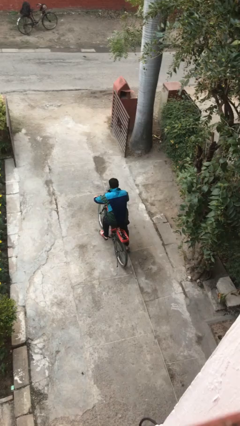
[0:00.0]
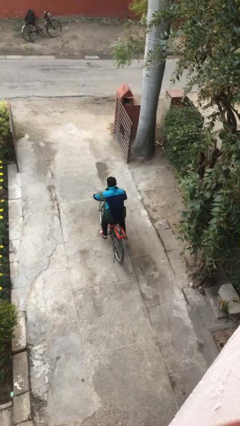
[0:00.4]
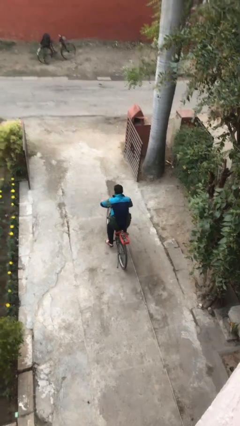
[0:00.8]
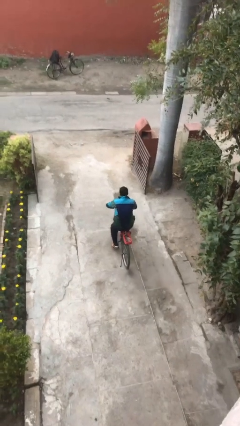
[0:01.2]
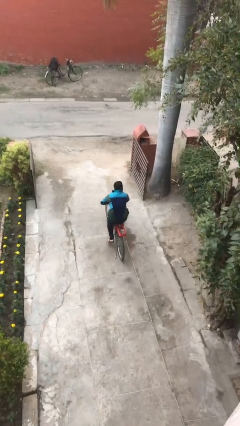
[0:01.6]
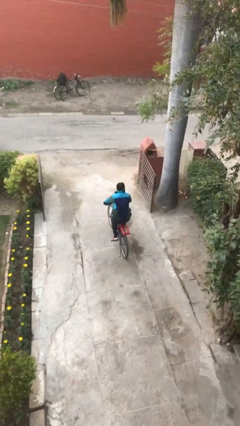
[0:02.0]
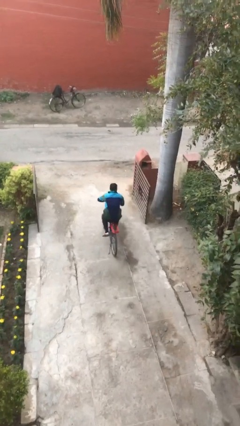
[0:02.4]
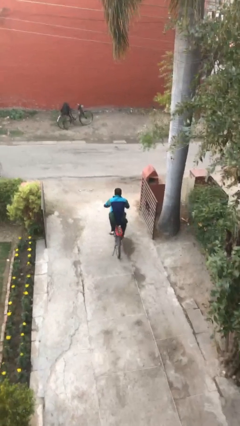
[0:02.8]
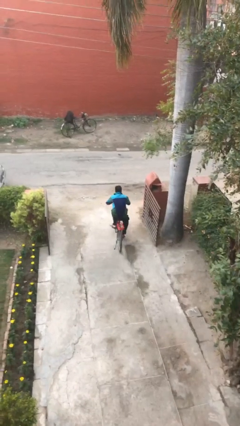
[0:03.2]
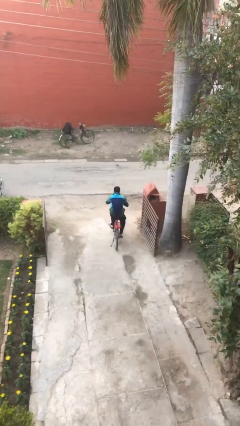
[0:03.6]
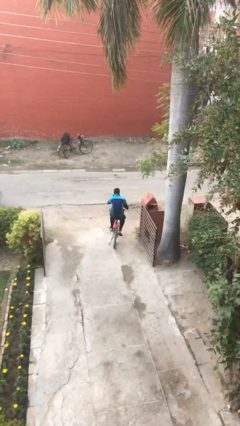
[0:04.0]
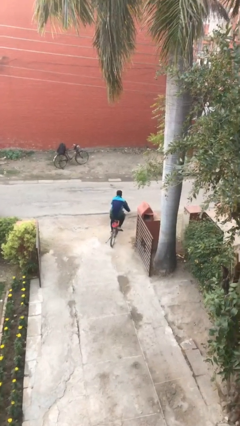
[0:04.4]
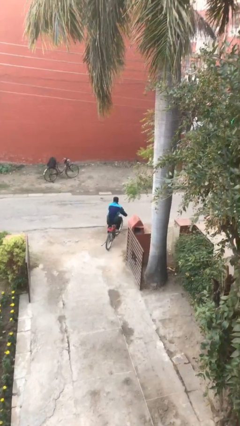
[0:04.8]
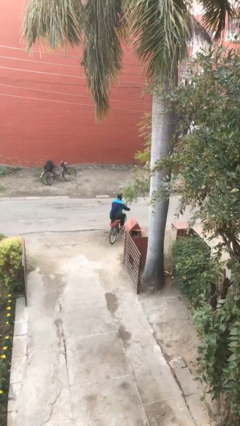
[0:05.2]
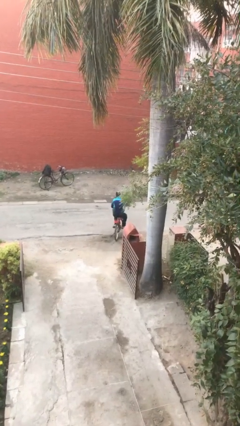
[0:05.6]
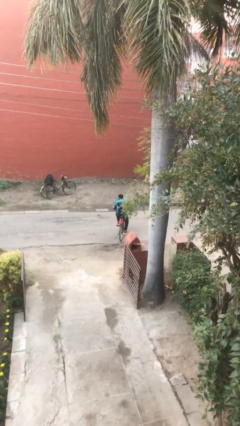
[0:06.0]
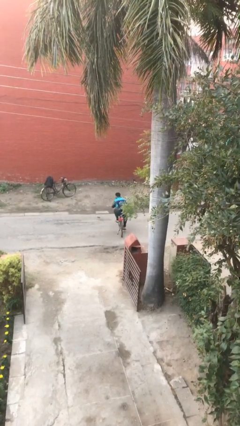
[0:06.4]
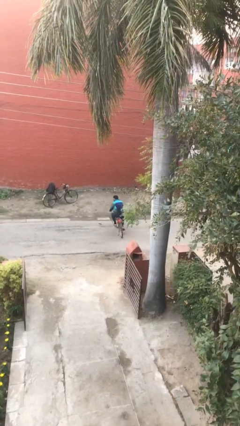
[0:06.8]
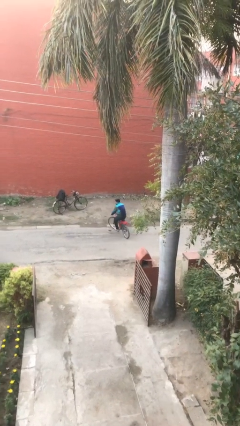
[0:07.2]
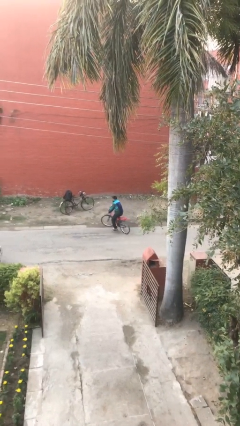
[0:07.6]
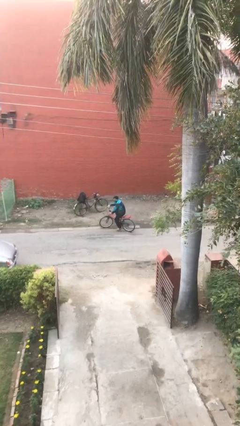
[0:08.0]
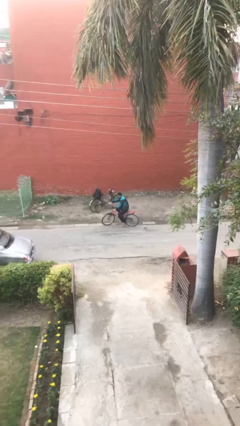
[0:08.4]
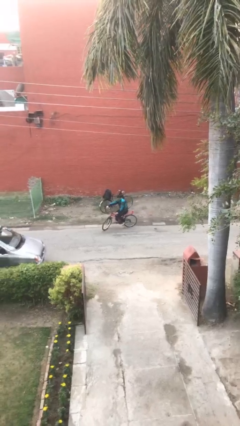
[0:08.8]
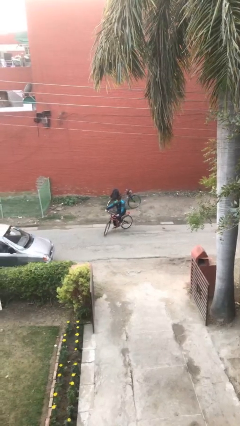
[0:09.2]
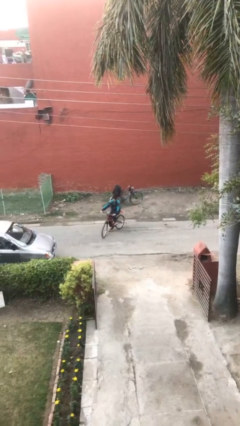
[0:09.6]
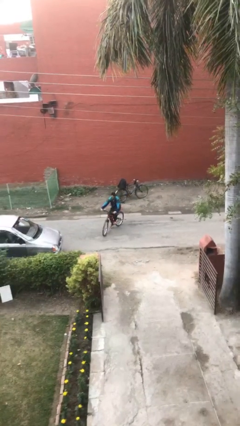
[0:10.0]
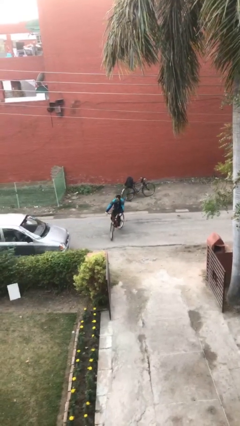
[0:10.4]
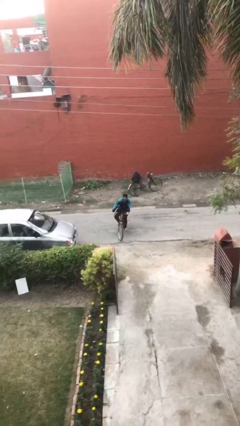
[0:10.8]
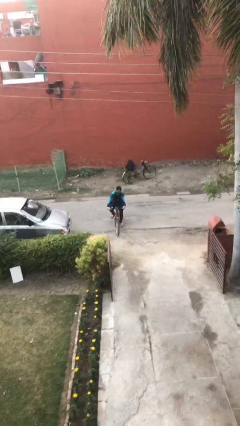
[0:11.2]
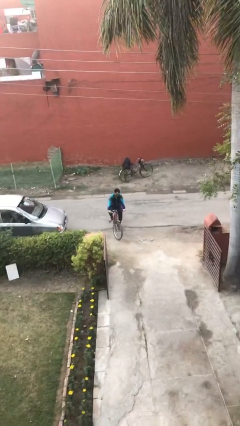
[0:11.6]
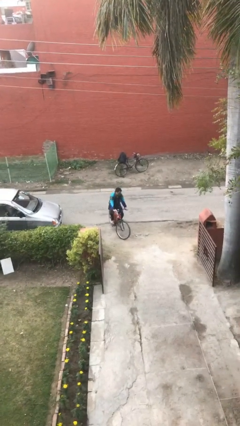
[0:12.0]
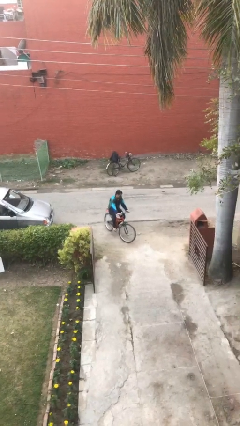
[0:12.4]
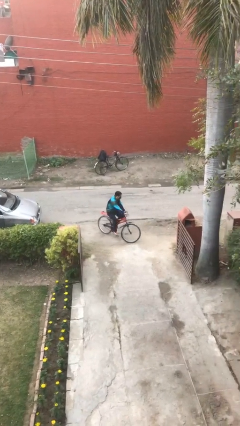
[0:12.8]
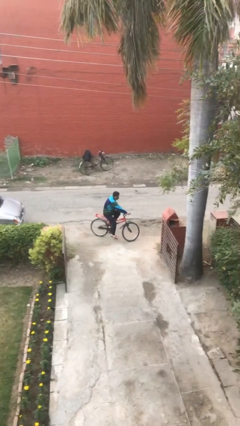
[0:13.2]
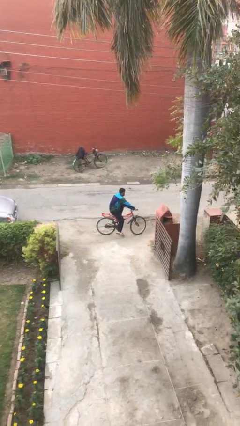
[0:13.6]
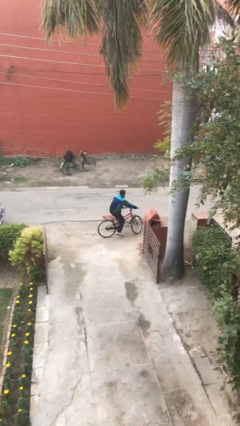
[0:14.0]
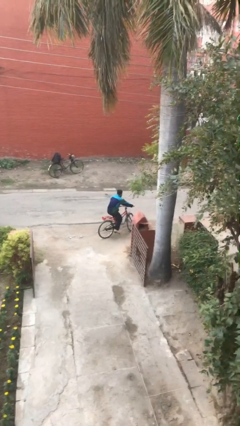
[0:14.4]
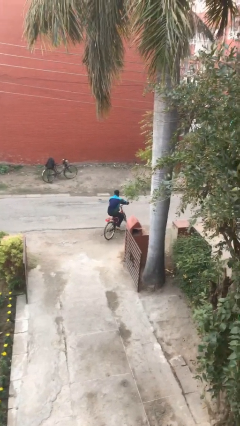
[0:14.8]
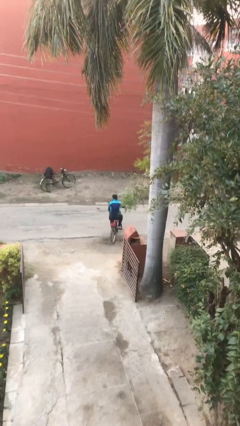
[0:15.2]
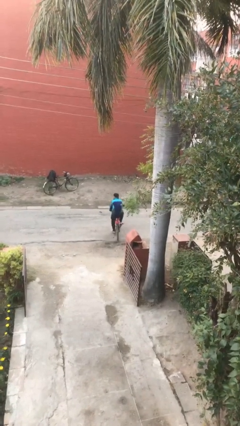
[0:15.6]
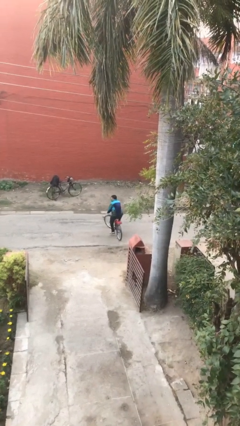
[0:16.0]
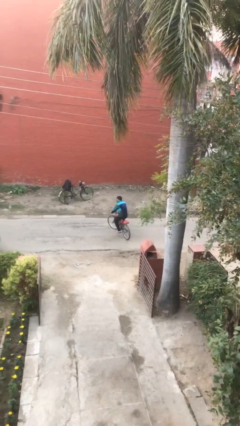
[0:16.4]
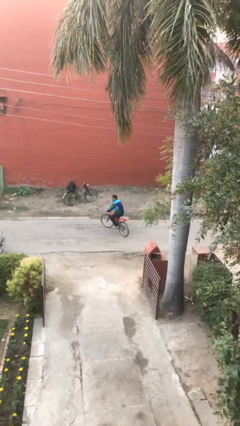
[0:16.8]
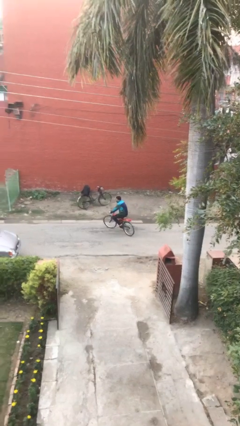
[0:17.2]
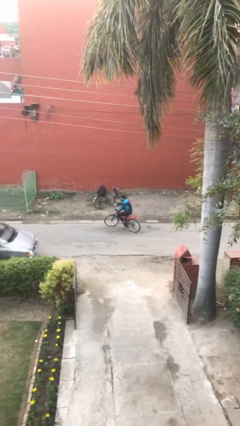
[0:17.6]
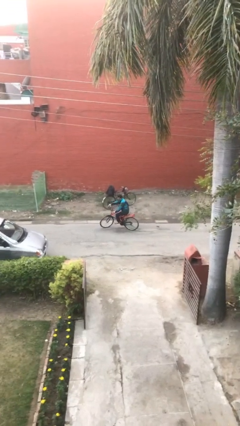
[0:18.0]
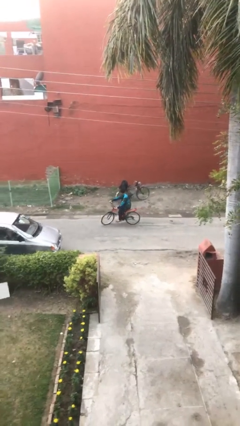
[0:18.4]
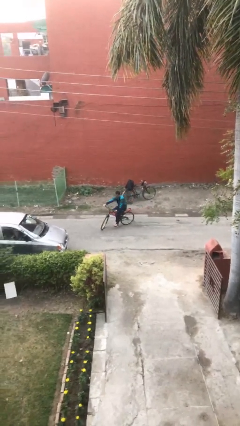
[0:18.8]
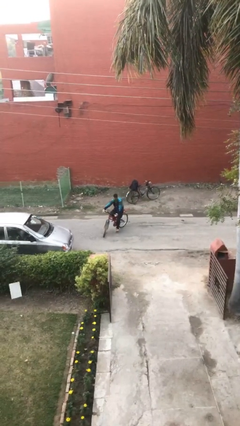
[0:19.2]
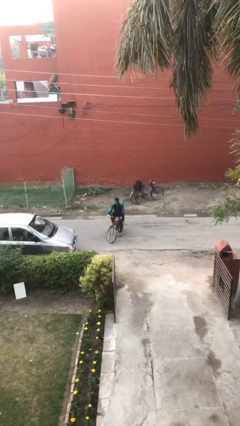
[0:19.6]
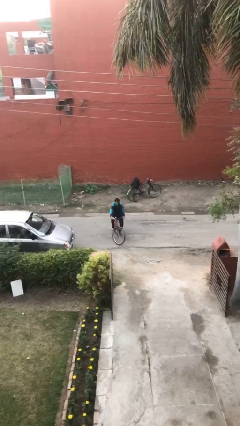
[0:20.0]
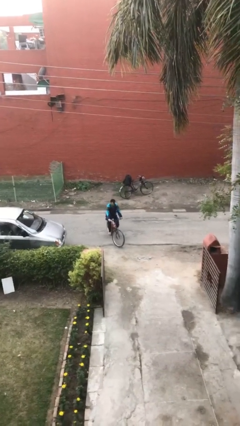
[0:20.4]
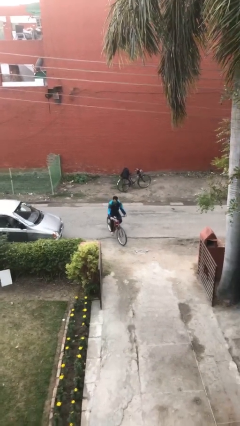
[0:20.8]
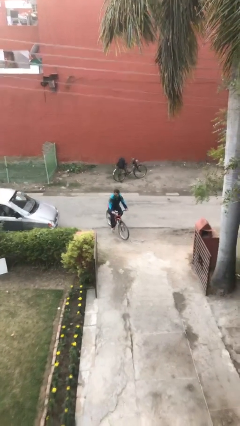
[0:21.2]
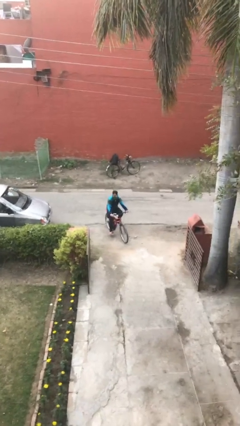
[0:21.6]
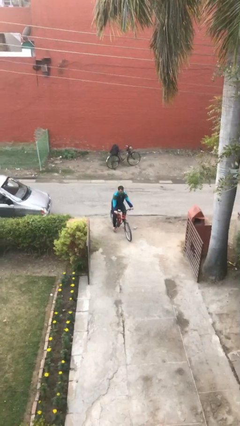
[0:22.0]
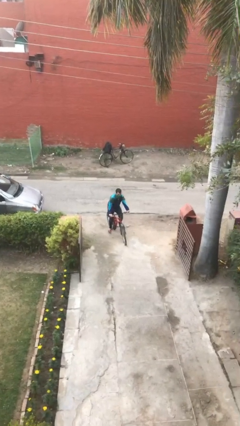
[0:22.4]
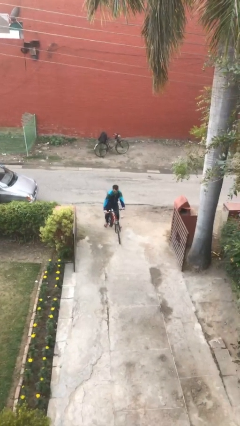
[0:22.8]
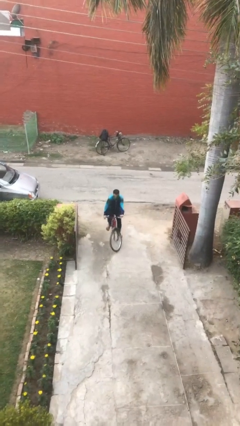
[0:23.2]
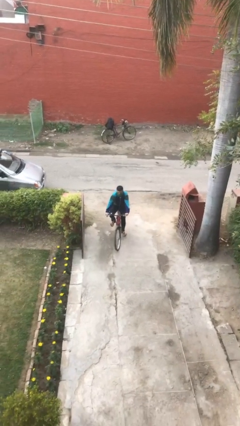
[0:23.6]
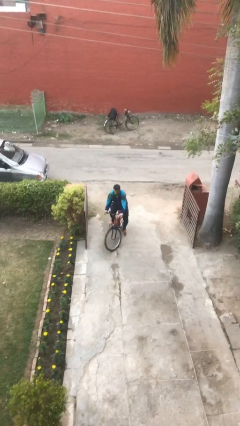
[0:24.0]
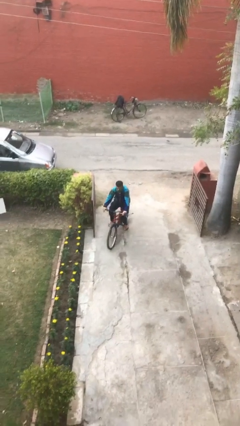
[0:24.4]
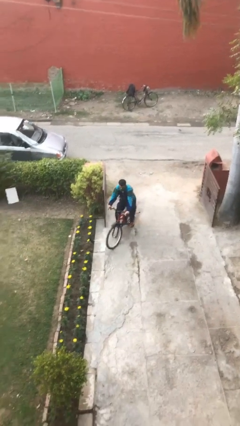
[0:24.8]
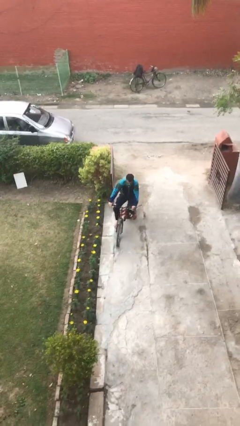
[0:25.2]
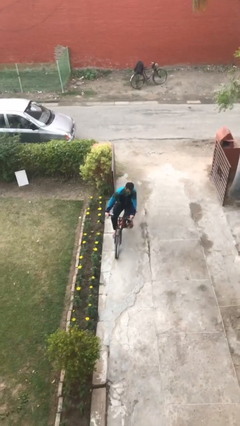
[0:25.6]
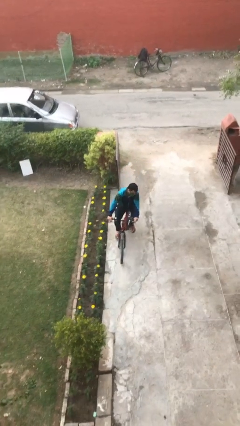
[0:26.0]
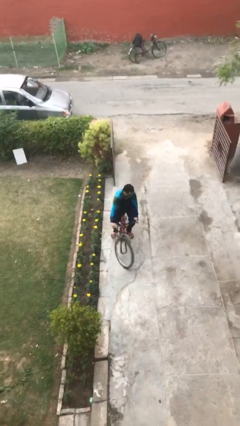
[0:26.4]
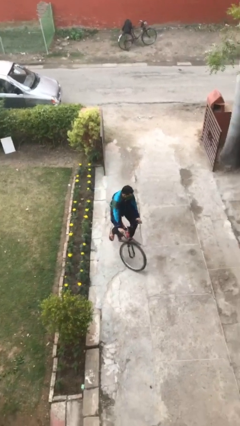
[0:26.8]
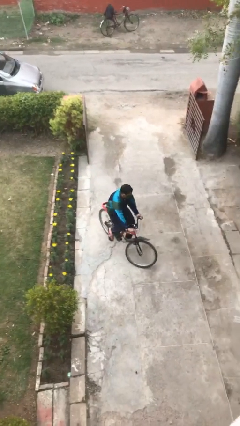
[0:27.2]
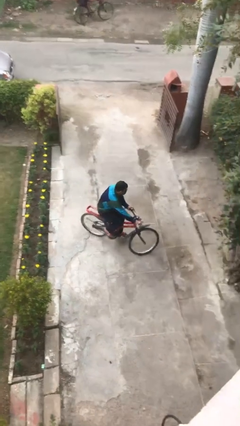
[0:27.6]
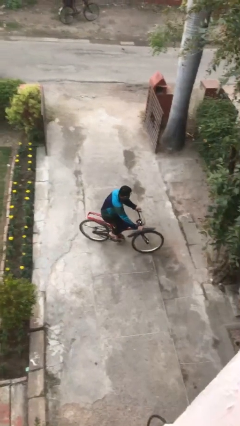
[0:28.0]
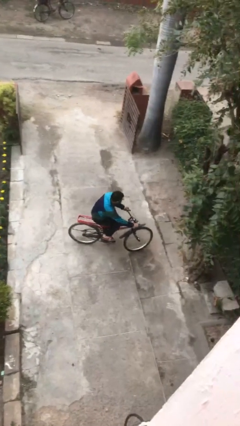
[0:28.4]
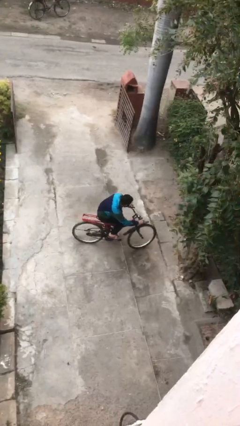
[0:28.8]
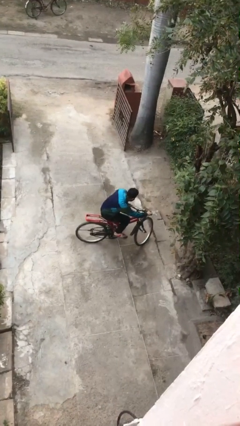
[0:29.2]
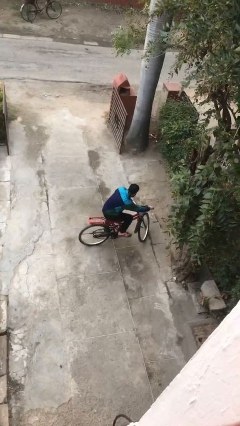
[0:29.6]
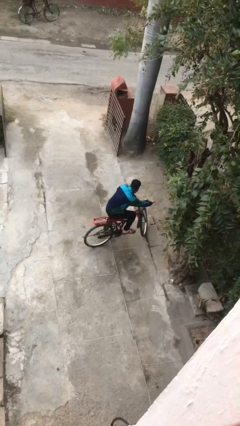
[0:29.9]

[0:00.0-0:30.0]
person rides bicycle

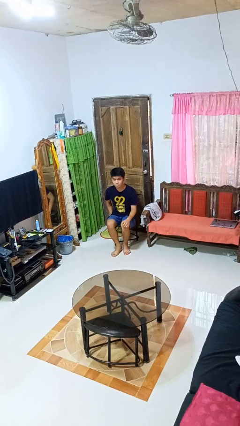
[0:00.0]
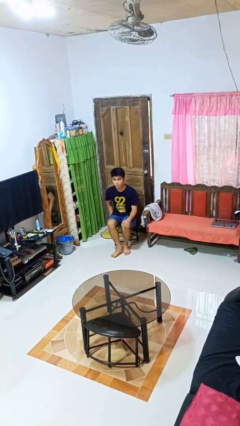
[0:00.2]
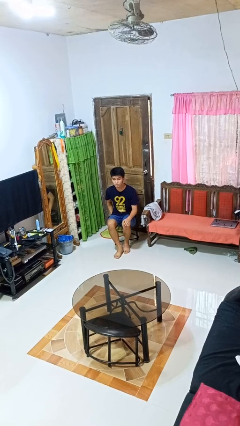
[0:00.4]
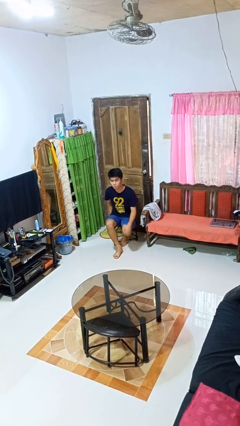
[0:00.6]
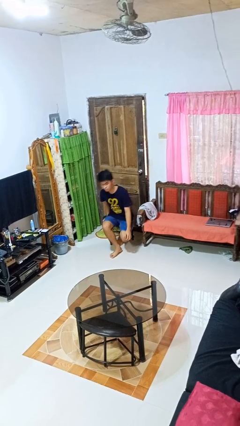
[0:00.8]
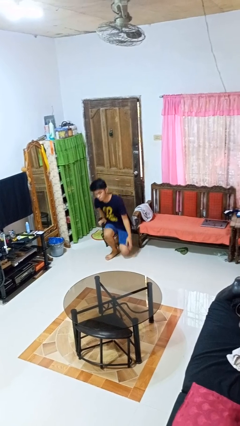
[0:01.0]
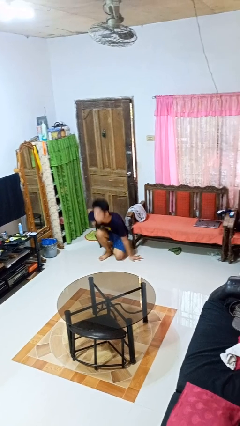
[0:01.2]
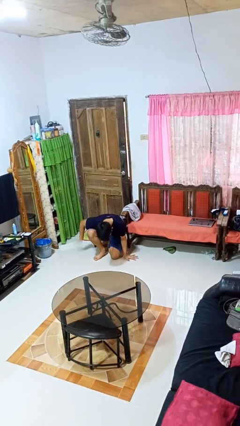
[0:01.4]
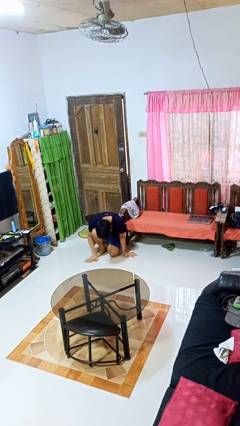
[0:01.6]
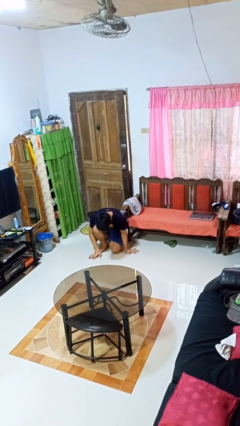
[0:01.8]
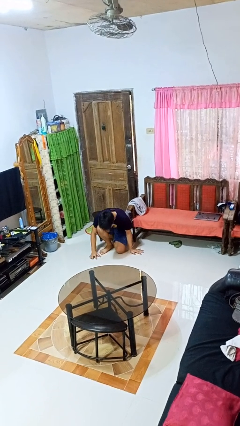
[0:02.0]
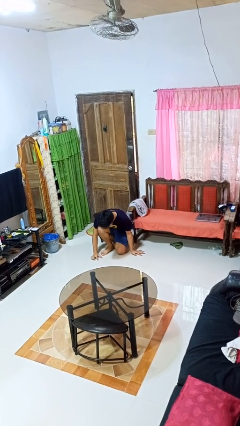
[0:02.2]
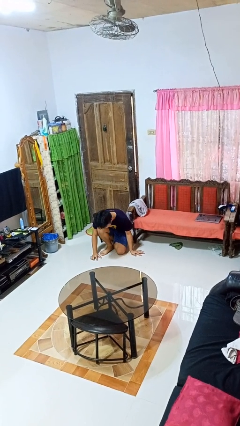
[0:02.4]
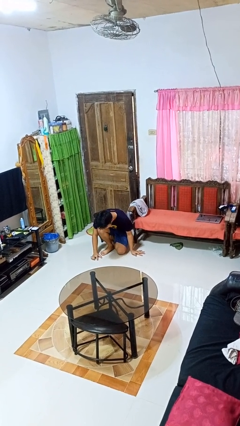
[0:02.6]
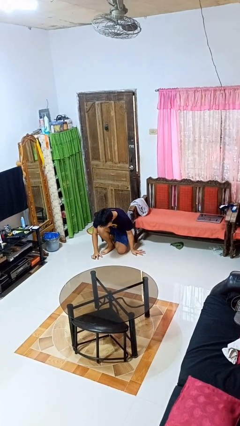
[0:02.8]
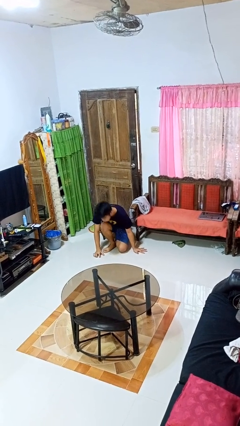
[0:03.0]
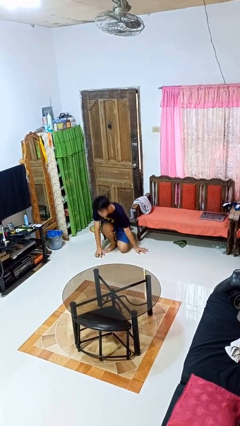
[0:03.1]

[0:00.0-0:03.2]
person falls from chair

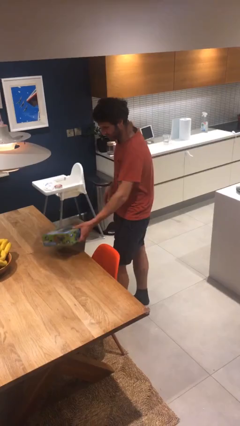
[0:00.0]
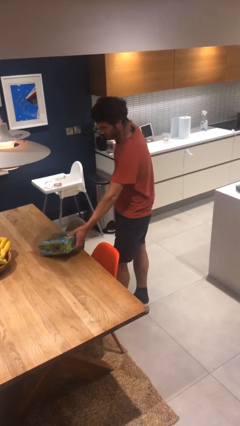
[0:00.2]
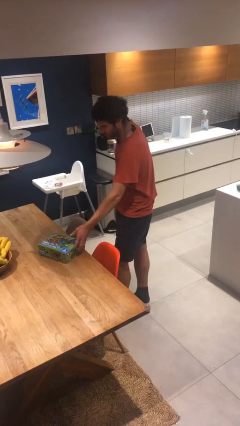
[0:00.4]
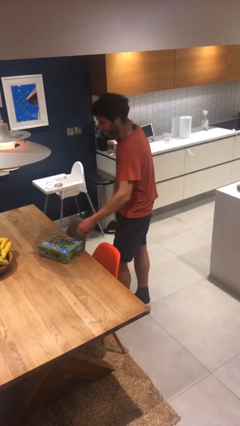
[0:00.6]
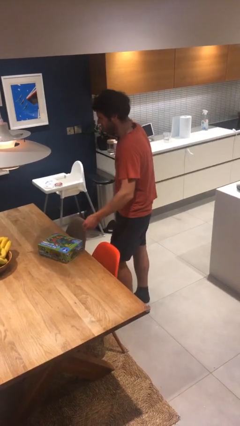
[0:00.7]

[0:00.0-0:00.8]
person puts down object on table
